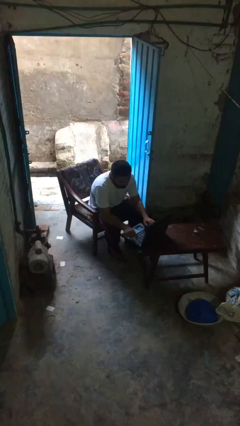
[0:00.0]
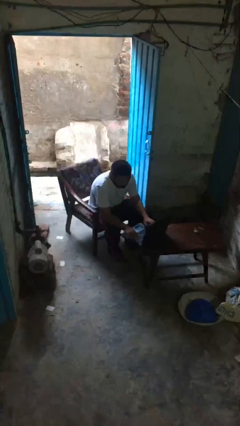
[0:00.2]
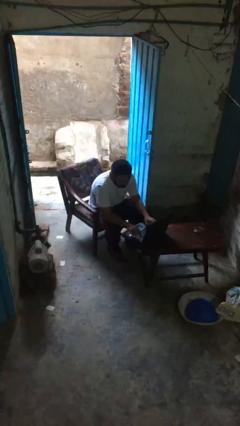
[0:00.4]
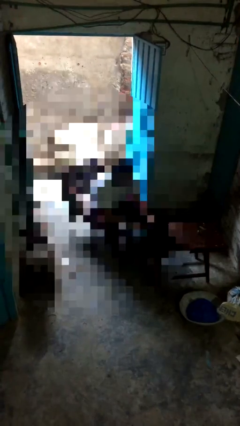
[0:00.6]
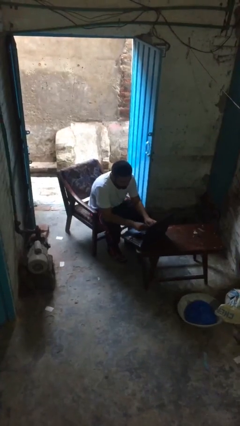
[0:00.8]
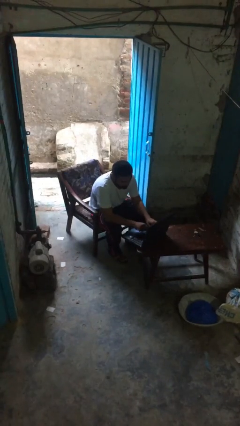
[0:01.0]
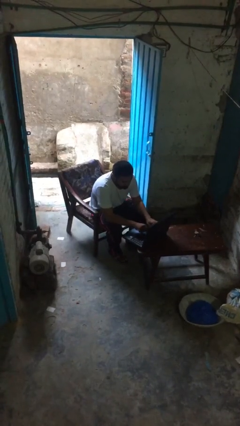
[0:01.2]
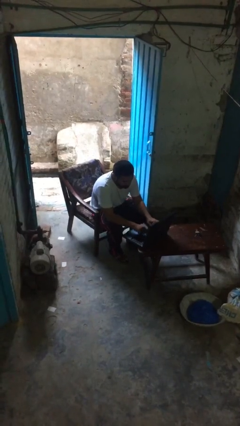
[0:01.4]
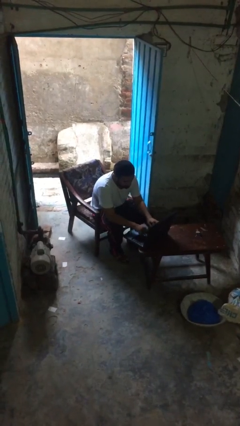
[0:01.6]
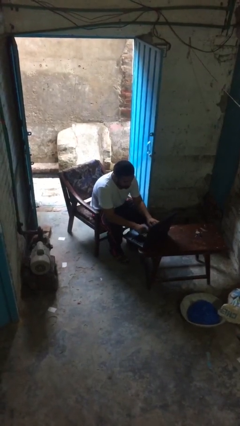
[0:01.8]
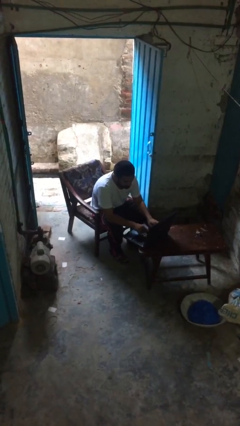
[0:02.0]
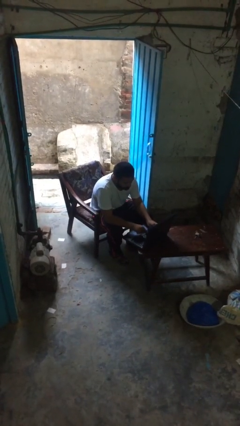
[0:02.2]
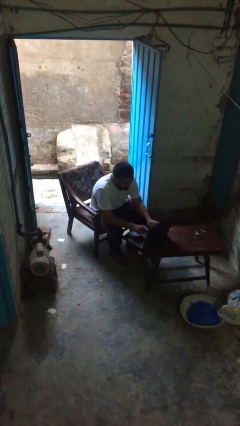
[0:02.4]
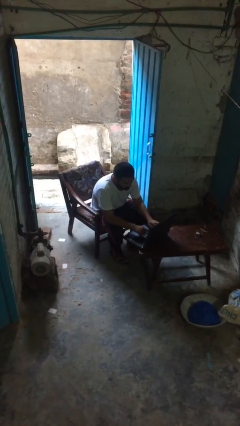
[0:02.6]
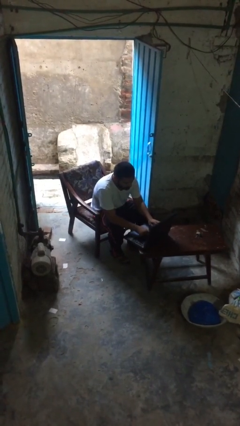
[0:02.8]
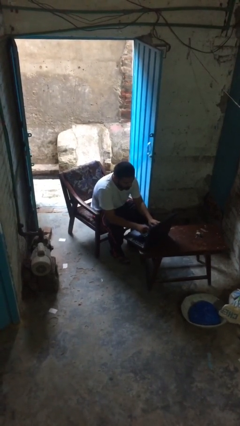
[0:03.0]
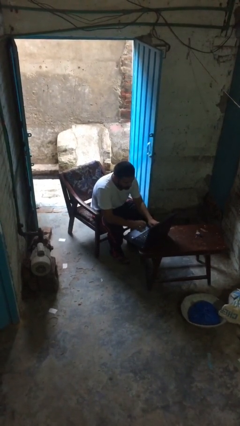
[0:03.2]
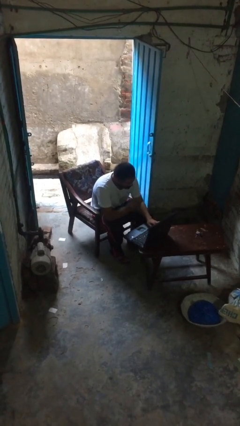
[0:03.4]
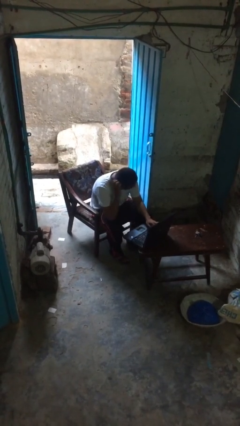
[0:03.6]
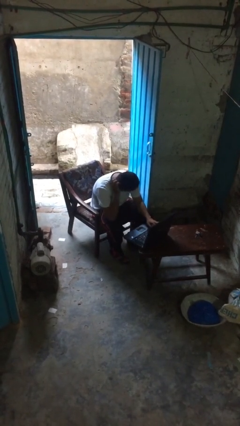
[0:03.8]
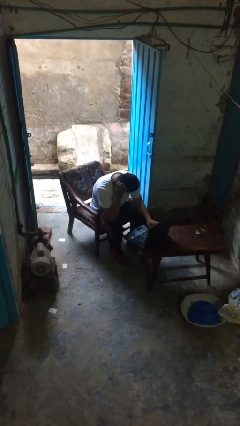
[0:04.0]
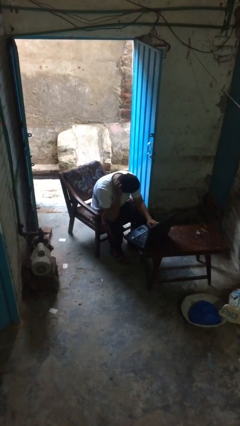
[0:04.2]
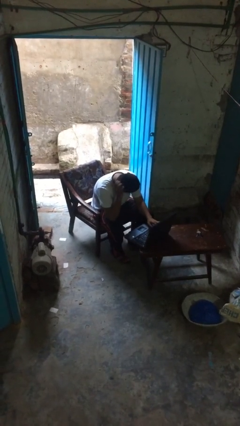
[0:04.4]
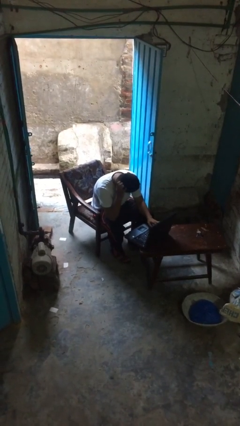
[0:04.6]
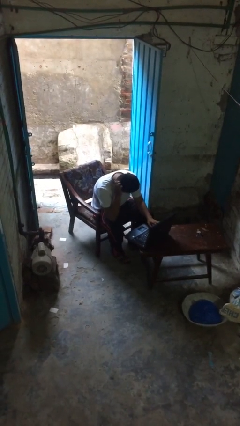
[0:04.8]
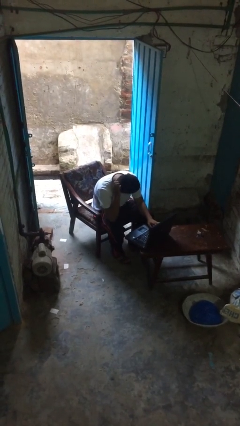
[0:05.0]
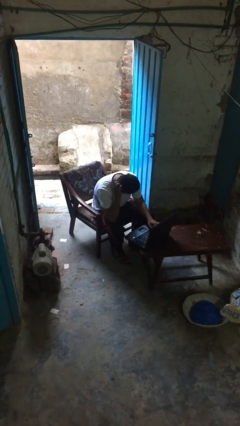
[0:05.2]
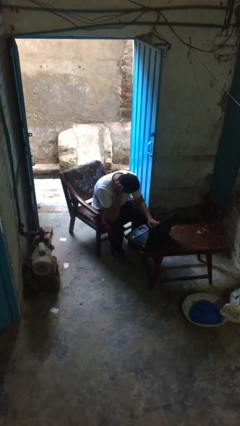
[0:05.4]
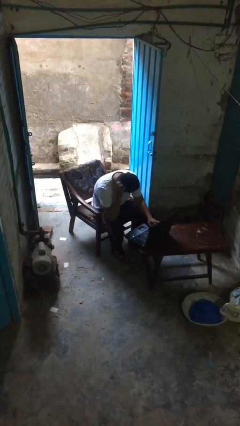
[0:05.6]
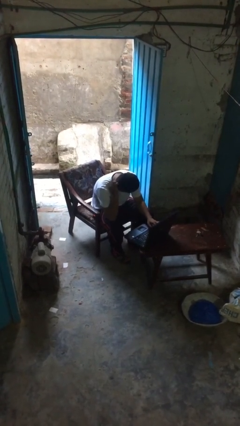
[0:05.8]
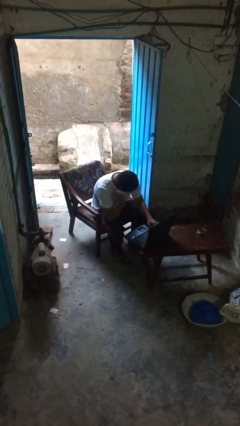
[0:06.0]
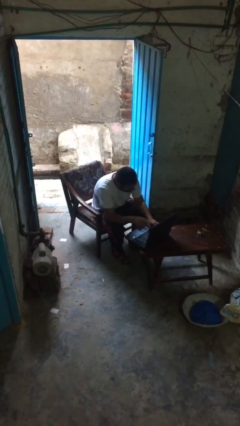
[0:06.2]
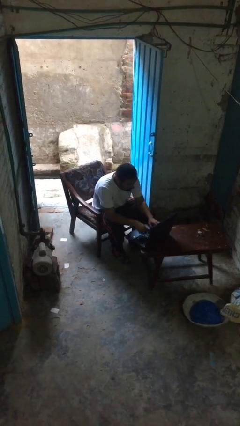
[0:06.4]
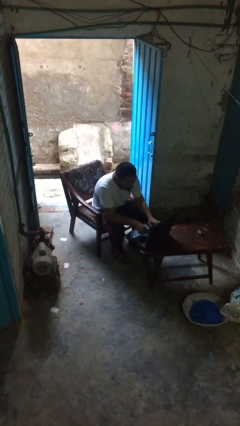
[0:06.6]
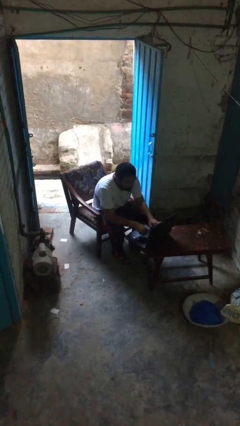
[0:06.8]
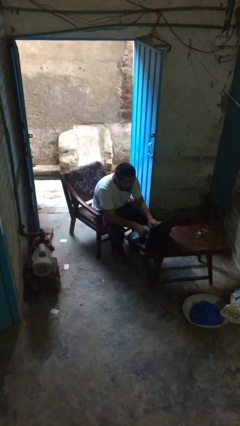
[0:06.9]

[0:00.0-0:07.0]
person interacts with laptop

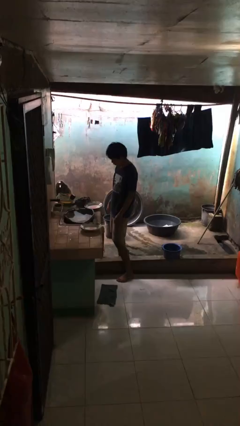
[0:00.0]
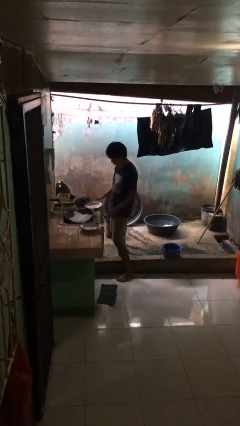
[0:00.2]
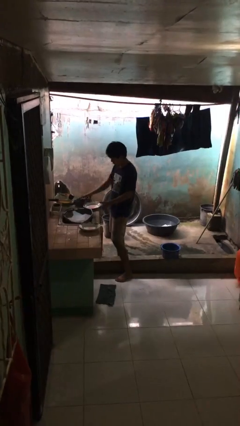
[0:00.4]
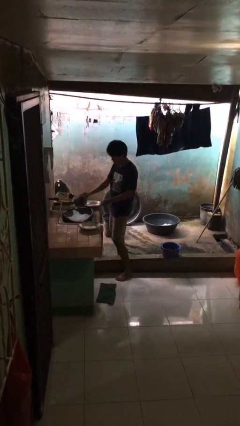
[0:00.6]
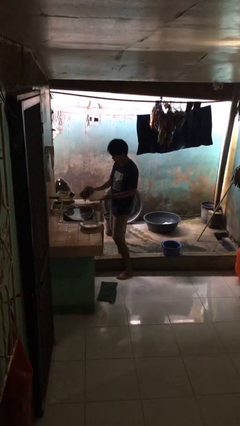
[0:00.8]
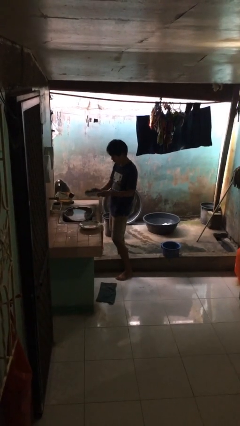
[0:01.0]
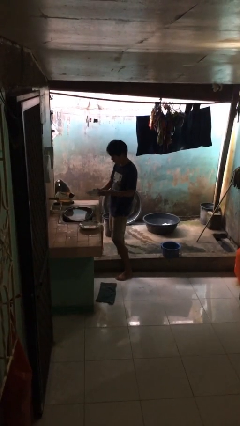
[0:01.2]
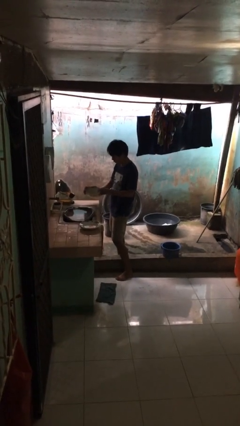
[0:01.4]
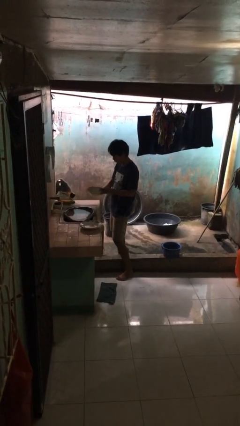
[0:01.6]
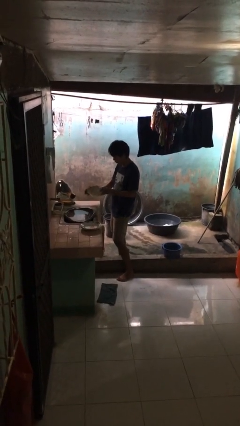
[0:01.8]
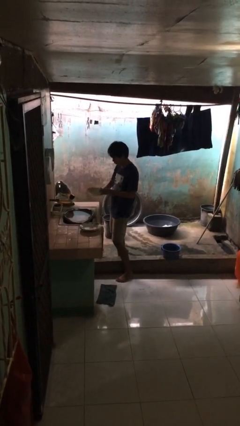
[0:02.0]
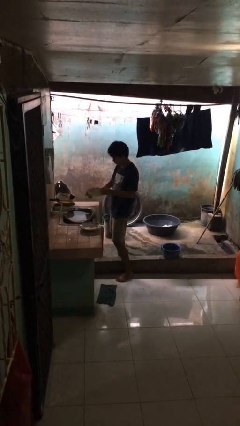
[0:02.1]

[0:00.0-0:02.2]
person dries dish

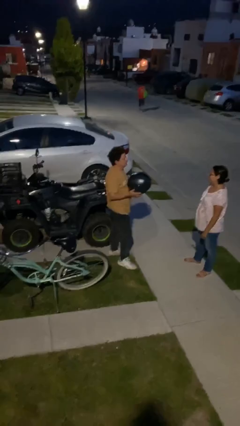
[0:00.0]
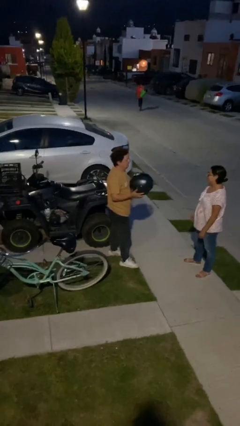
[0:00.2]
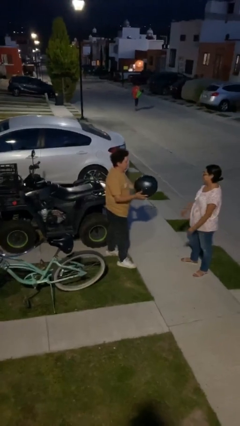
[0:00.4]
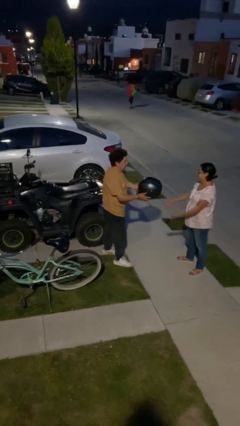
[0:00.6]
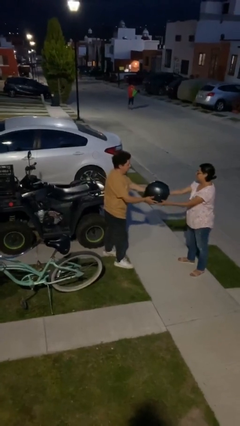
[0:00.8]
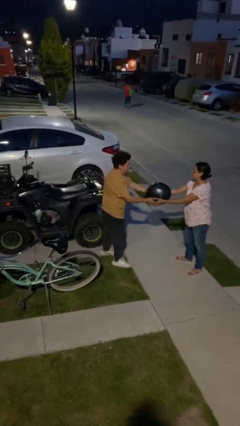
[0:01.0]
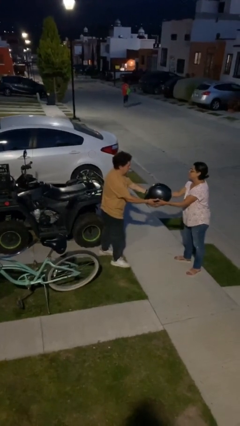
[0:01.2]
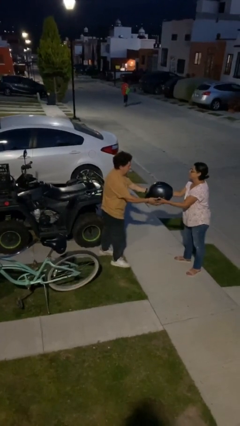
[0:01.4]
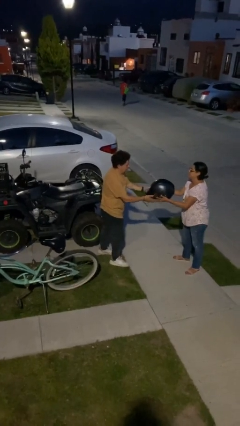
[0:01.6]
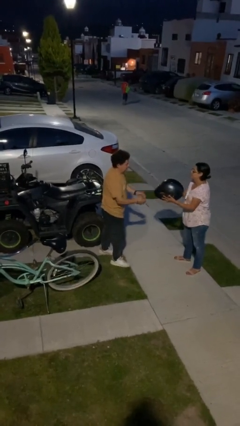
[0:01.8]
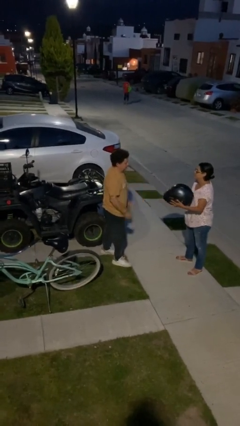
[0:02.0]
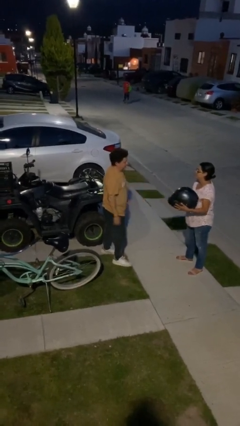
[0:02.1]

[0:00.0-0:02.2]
person transfers object to person

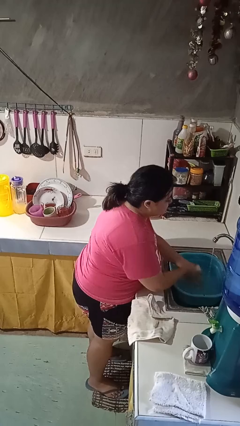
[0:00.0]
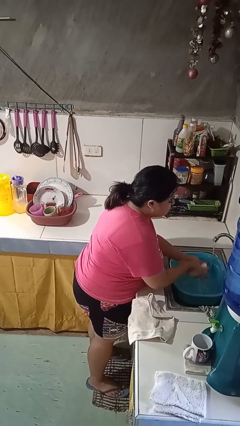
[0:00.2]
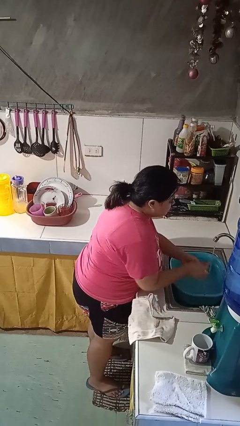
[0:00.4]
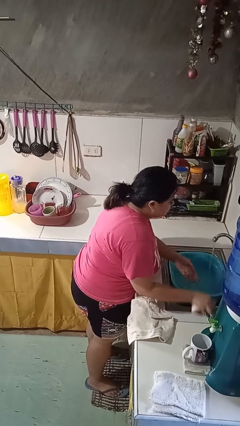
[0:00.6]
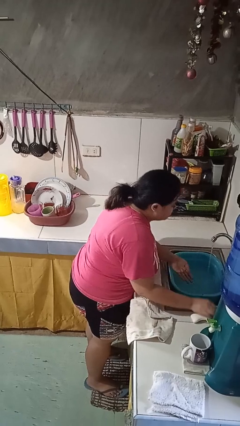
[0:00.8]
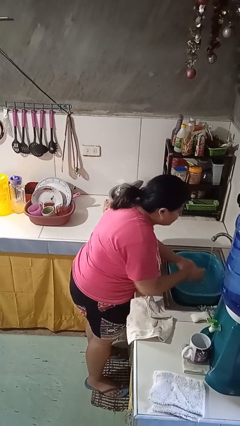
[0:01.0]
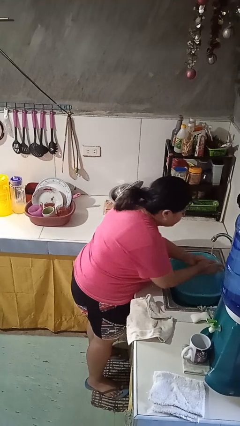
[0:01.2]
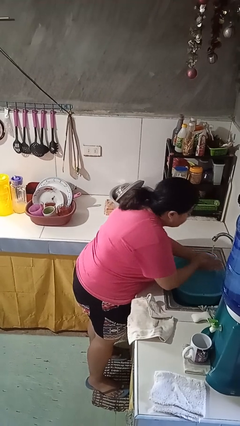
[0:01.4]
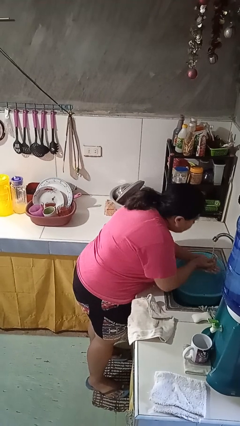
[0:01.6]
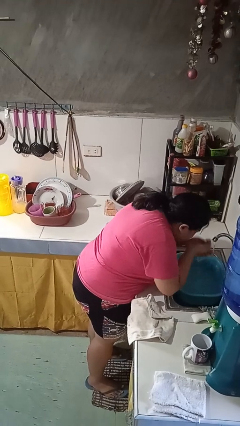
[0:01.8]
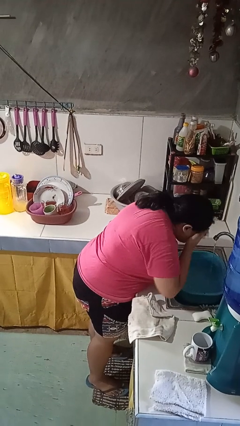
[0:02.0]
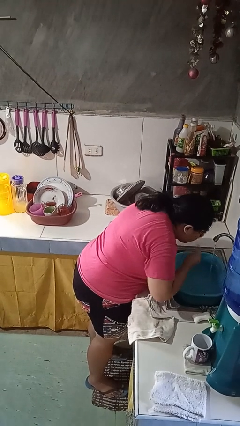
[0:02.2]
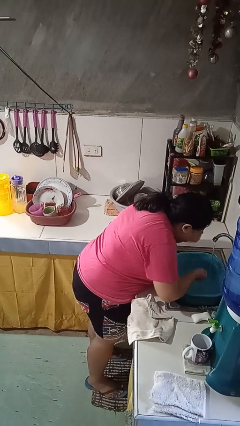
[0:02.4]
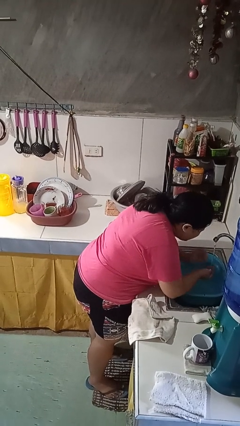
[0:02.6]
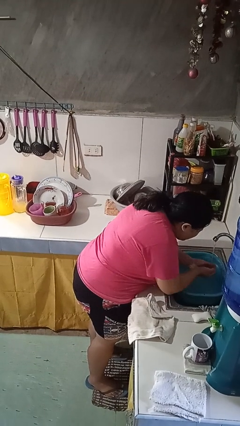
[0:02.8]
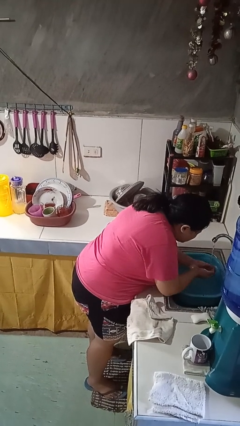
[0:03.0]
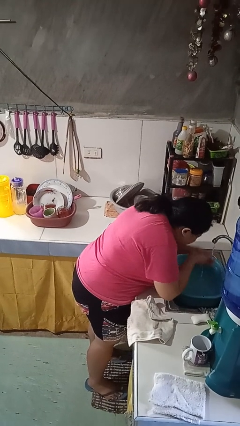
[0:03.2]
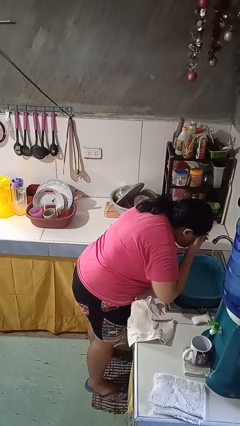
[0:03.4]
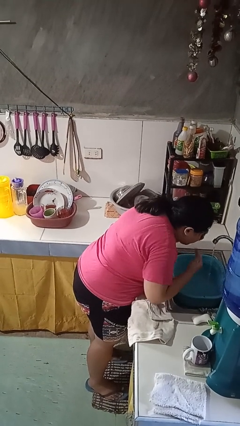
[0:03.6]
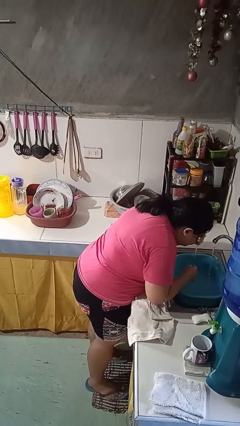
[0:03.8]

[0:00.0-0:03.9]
person washes face

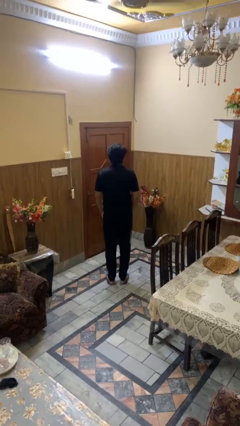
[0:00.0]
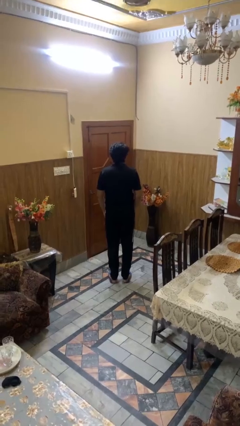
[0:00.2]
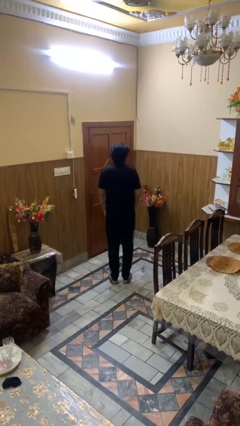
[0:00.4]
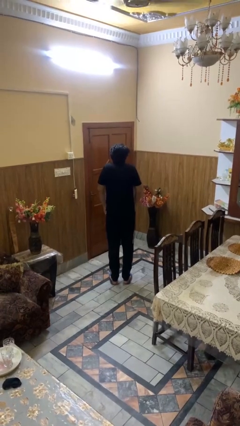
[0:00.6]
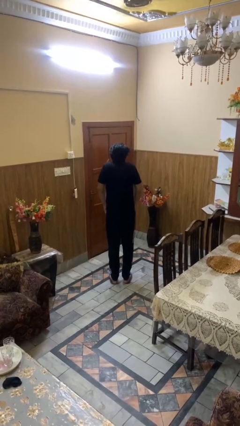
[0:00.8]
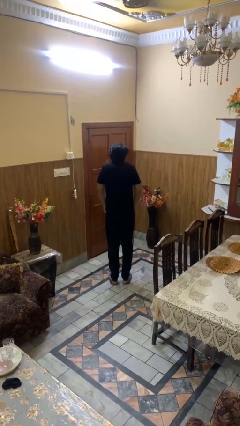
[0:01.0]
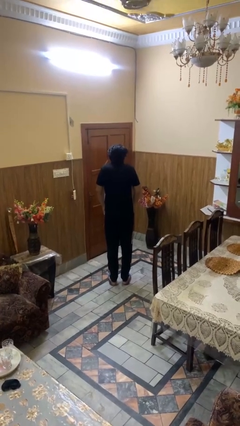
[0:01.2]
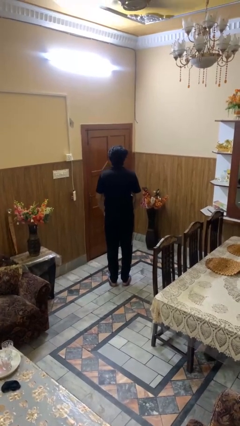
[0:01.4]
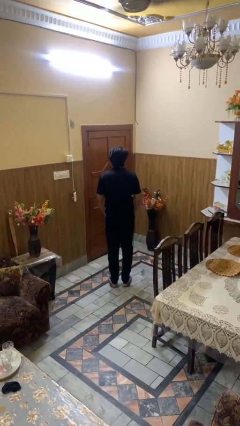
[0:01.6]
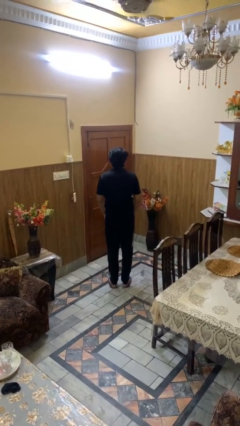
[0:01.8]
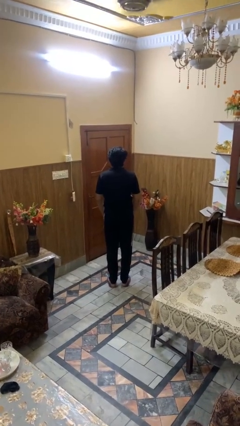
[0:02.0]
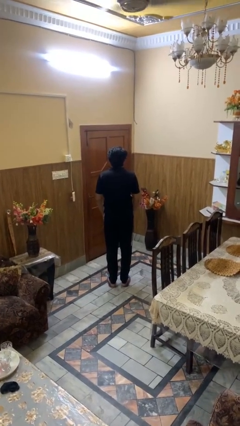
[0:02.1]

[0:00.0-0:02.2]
person shrugs

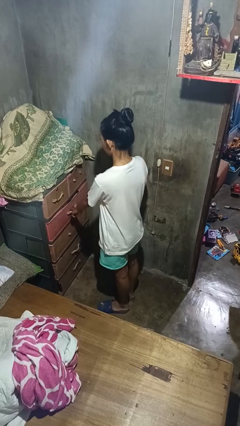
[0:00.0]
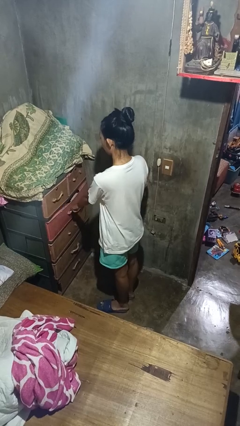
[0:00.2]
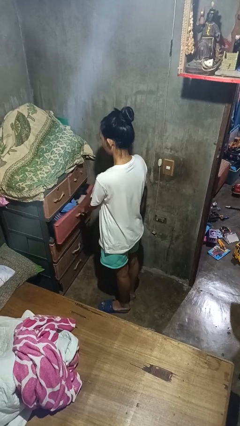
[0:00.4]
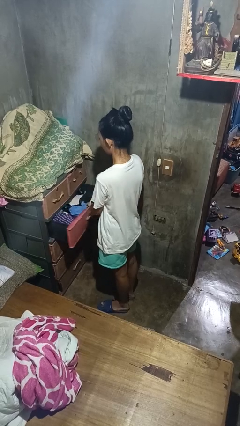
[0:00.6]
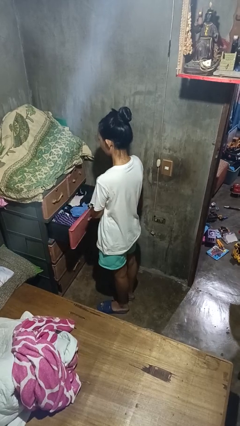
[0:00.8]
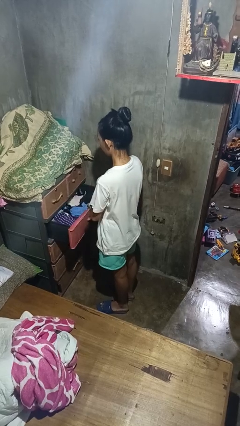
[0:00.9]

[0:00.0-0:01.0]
person opens dresser drawer
